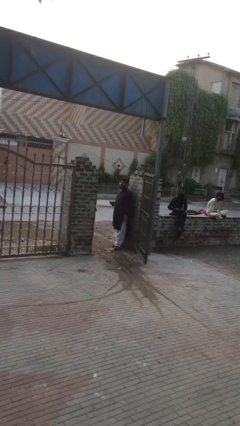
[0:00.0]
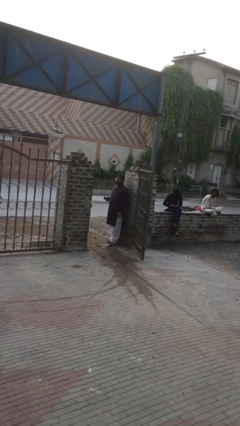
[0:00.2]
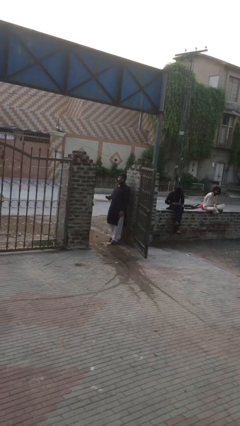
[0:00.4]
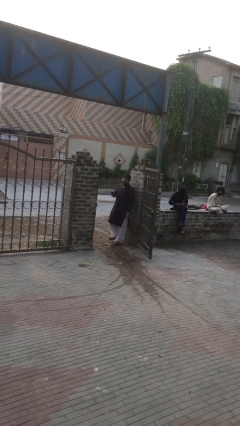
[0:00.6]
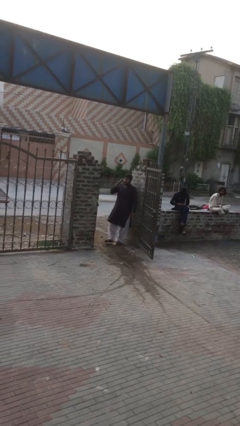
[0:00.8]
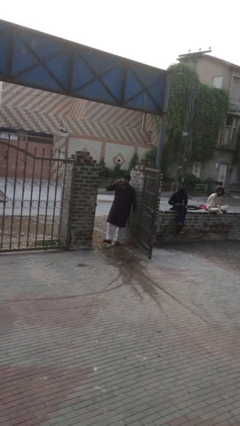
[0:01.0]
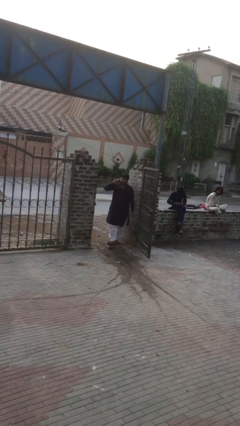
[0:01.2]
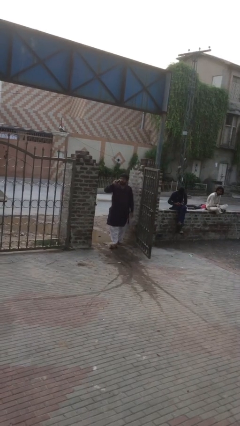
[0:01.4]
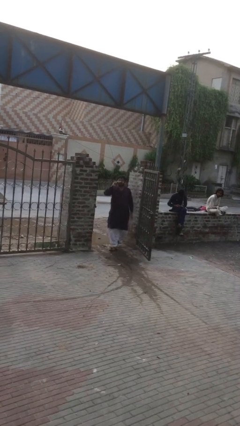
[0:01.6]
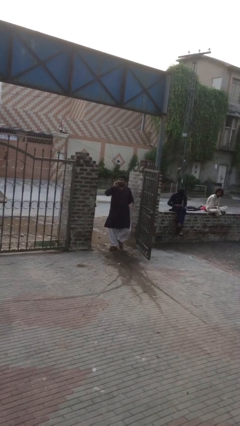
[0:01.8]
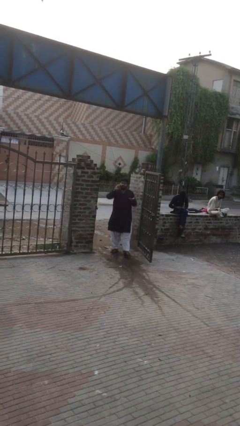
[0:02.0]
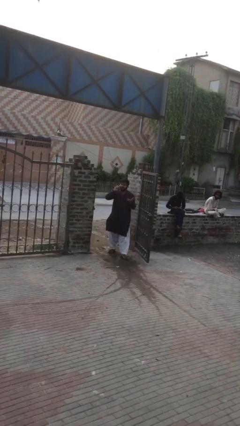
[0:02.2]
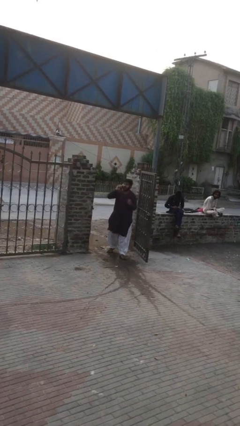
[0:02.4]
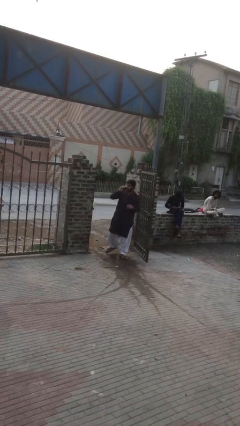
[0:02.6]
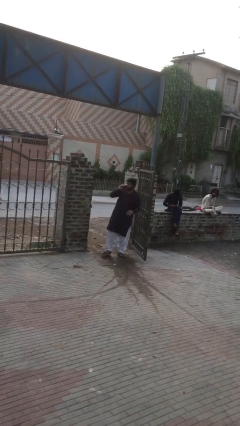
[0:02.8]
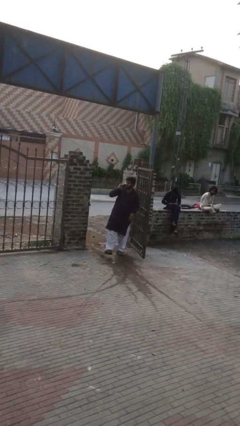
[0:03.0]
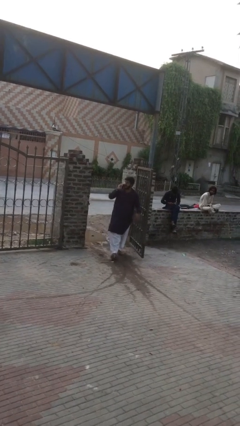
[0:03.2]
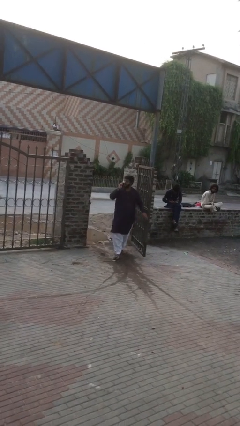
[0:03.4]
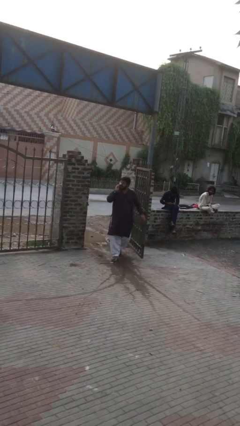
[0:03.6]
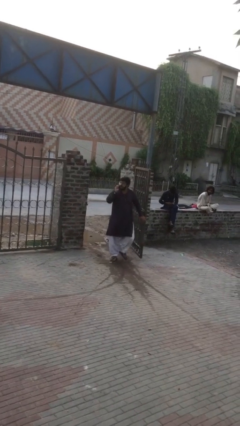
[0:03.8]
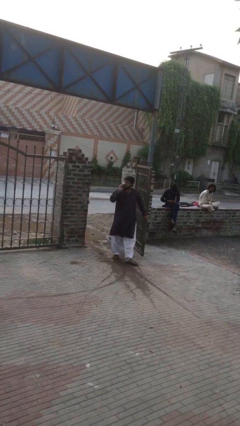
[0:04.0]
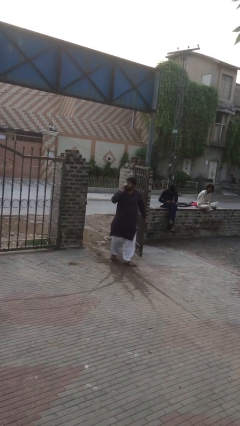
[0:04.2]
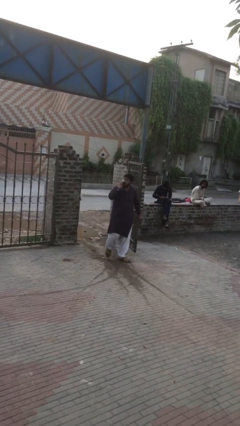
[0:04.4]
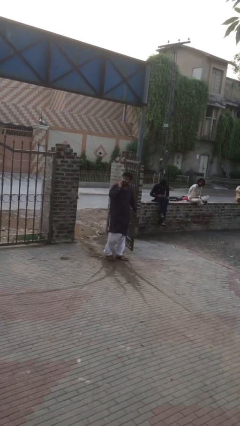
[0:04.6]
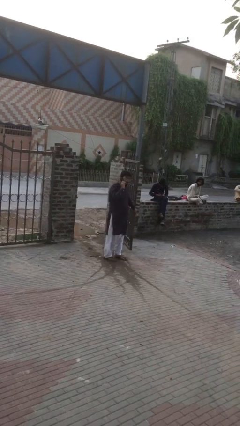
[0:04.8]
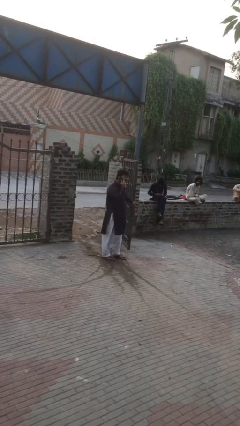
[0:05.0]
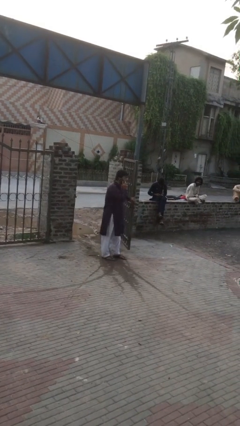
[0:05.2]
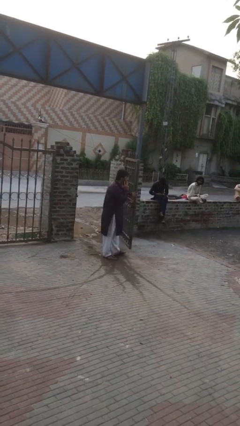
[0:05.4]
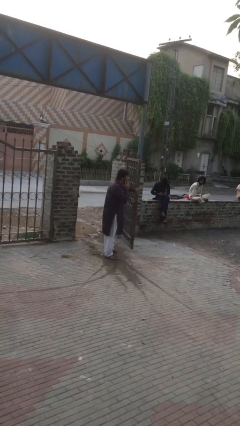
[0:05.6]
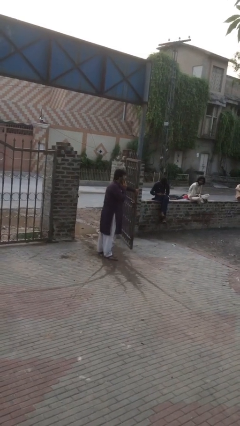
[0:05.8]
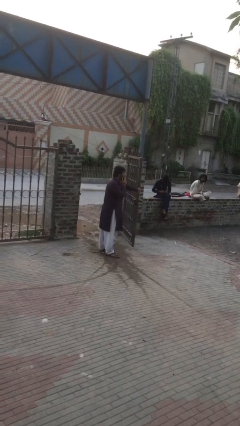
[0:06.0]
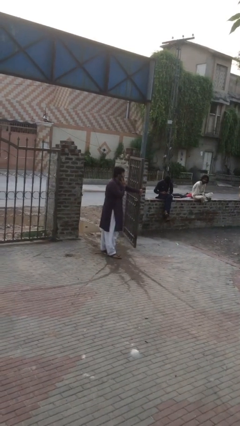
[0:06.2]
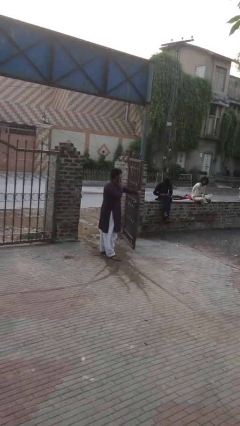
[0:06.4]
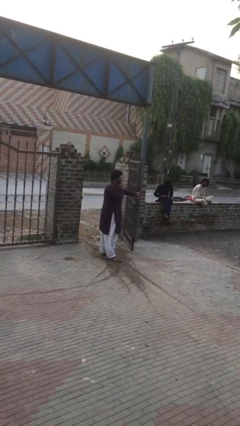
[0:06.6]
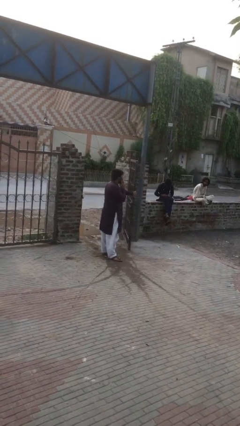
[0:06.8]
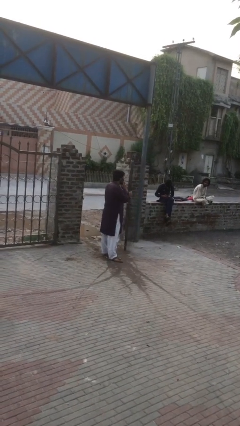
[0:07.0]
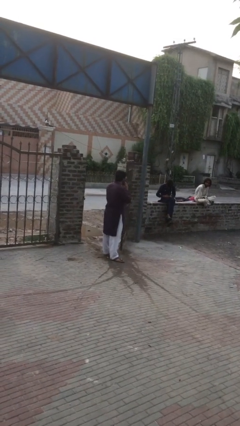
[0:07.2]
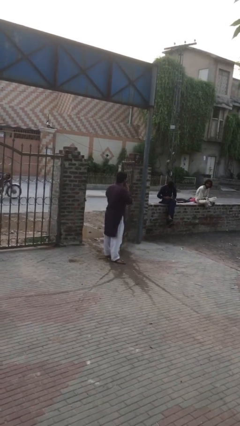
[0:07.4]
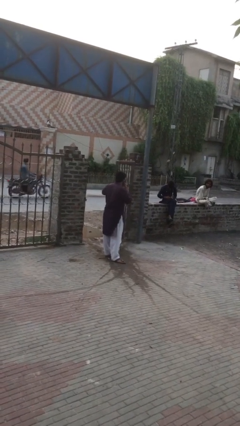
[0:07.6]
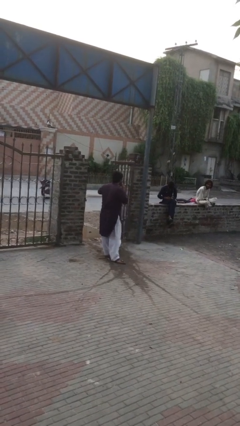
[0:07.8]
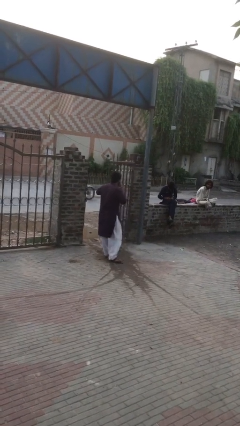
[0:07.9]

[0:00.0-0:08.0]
person enters scene through structure

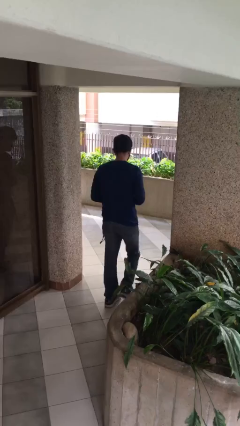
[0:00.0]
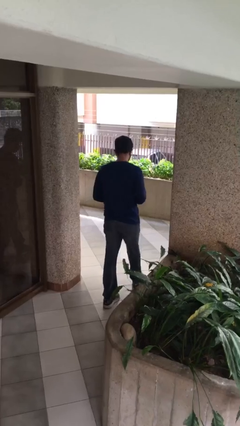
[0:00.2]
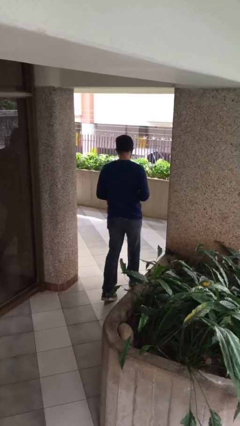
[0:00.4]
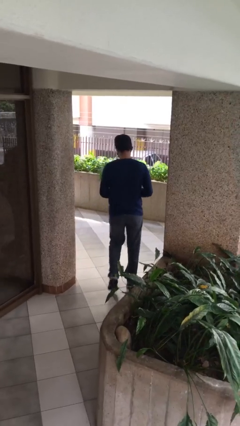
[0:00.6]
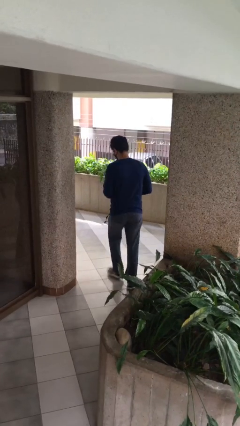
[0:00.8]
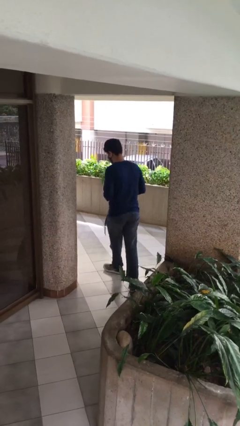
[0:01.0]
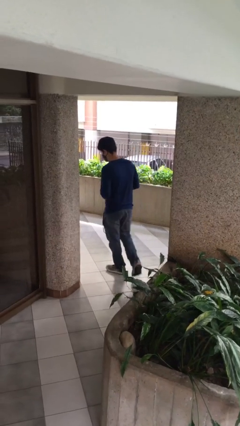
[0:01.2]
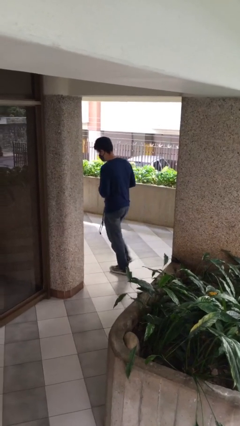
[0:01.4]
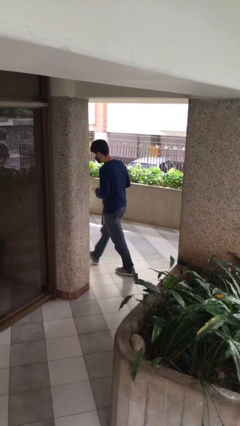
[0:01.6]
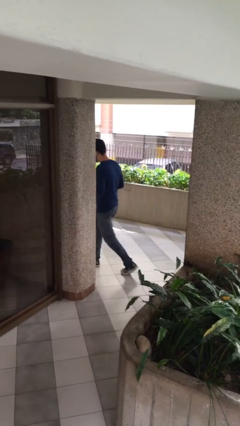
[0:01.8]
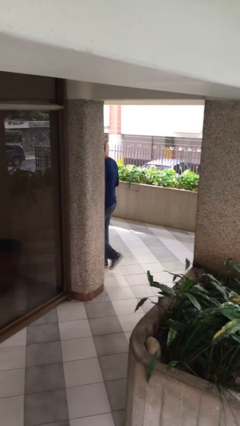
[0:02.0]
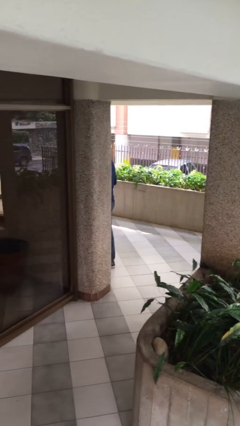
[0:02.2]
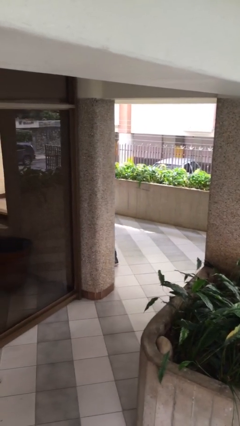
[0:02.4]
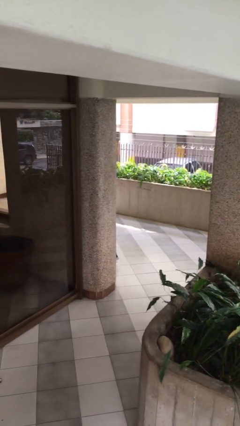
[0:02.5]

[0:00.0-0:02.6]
person exits scene through structure

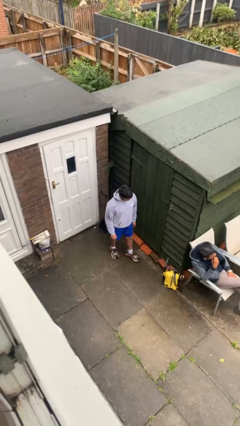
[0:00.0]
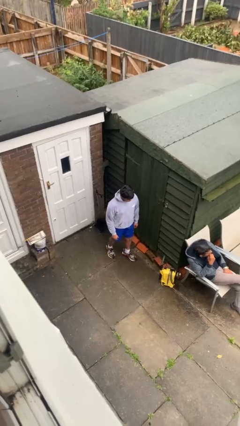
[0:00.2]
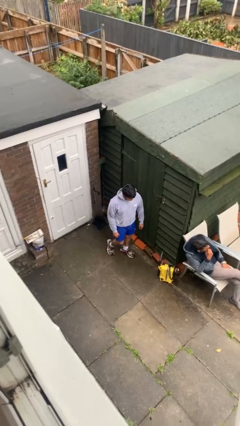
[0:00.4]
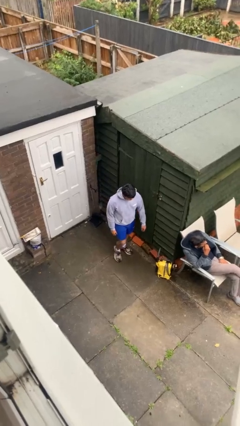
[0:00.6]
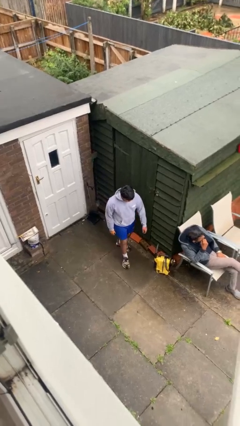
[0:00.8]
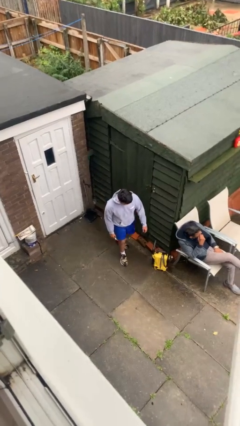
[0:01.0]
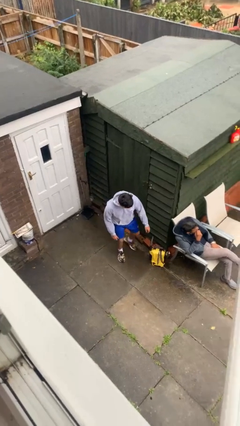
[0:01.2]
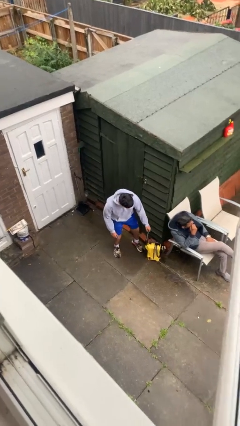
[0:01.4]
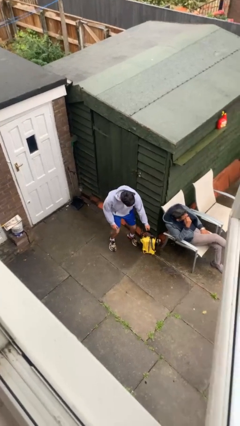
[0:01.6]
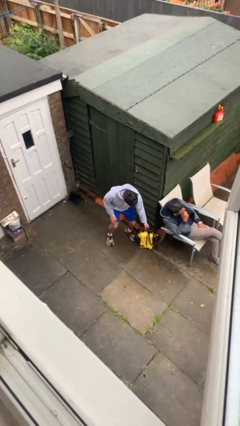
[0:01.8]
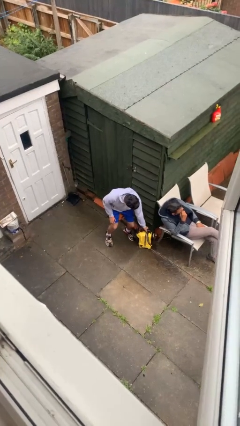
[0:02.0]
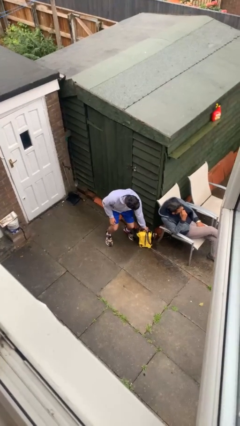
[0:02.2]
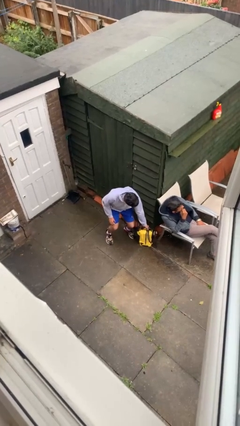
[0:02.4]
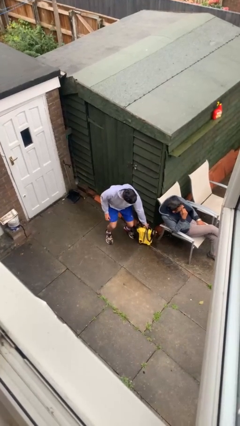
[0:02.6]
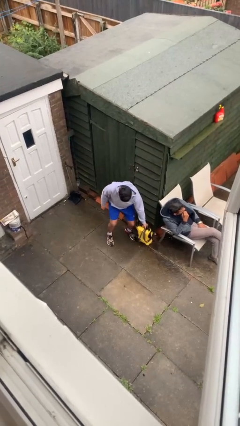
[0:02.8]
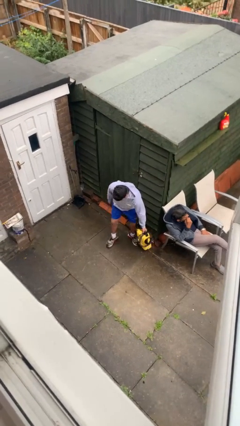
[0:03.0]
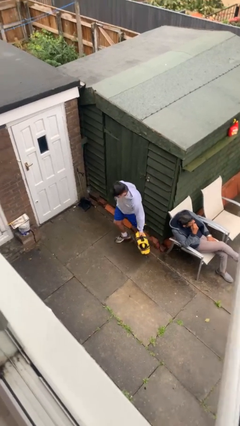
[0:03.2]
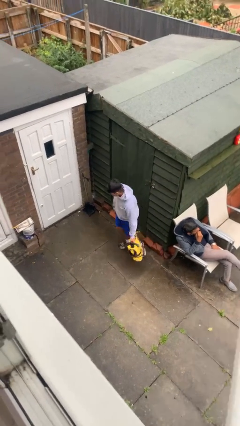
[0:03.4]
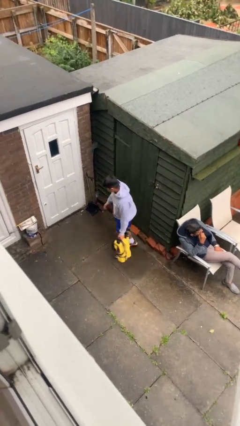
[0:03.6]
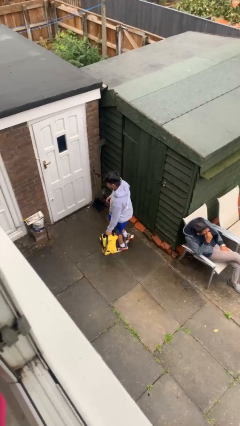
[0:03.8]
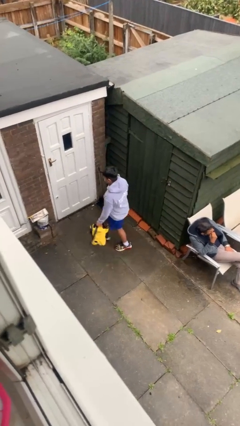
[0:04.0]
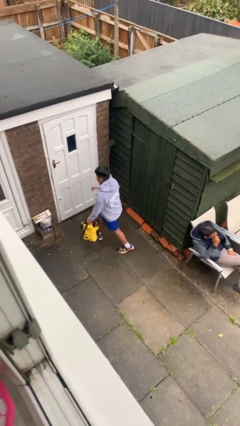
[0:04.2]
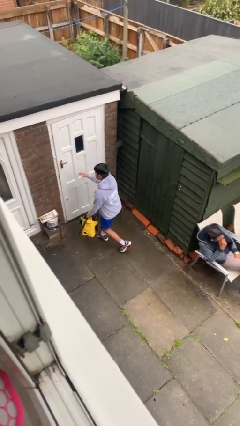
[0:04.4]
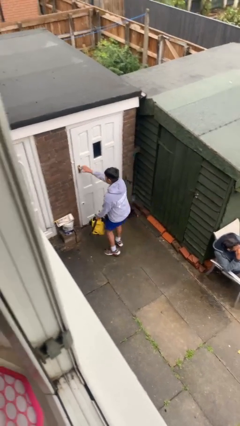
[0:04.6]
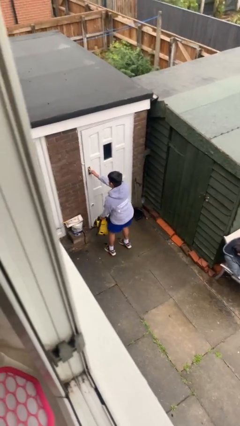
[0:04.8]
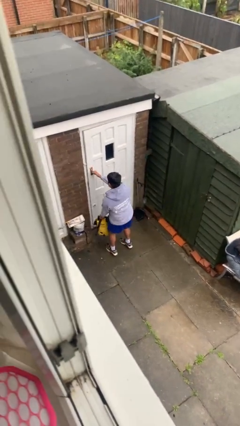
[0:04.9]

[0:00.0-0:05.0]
person steals object from person

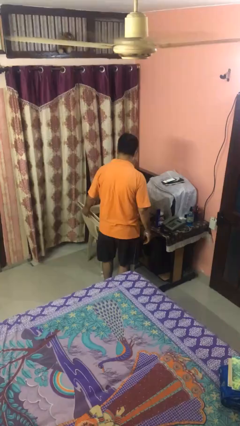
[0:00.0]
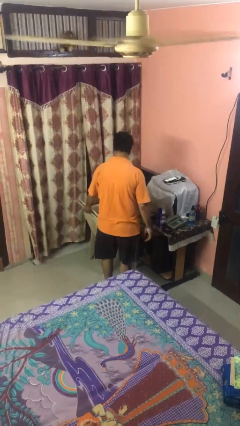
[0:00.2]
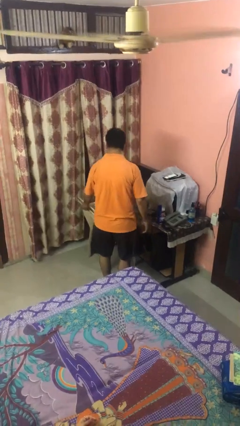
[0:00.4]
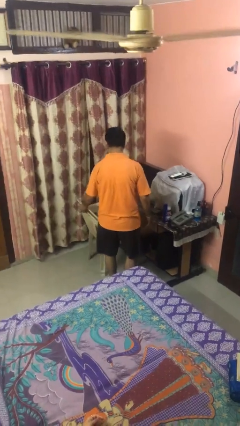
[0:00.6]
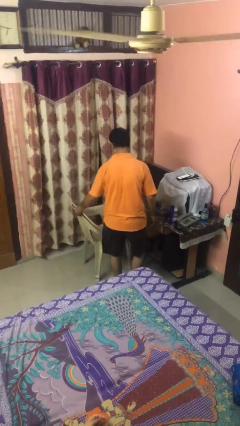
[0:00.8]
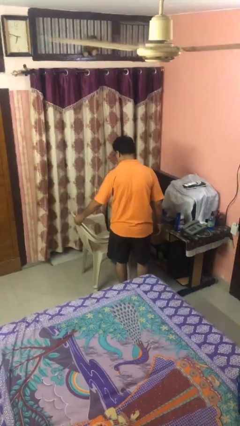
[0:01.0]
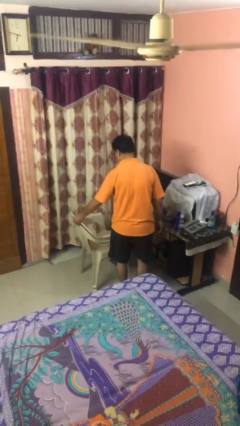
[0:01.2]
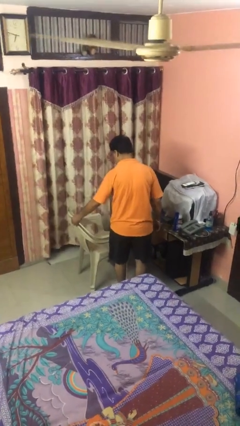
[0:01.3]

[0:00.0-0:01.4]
person pulls out chair

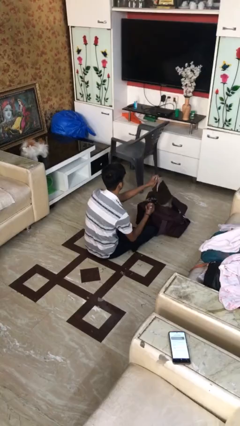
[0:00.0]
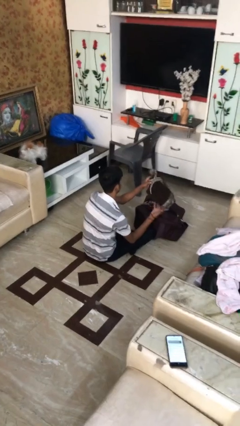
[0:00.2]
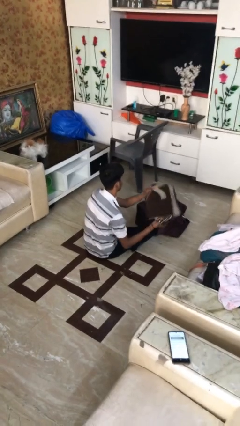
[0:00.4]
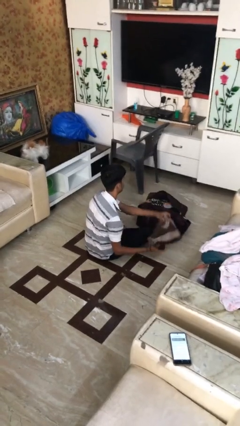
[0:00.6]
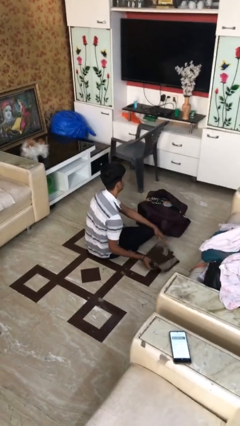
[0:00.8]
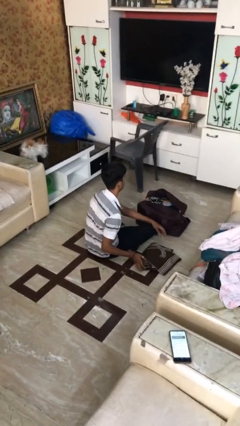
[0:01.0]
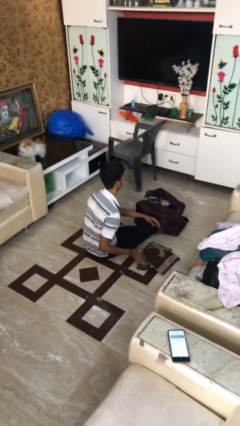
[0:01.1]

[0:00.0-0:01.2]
person unloads clothes from suitcase
